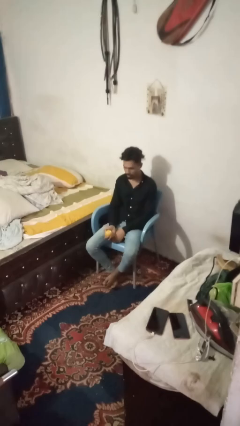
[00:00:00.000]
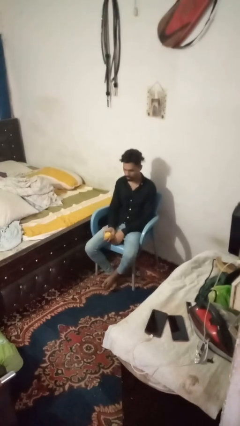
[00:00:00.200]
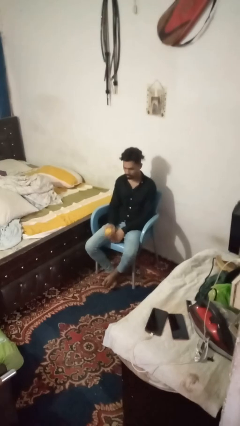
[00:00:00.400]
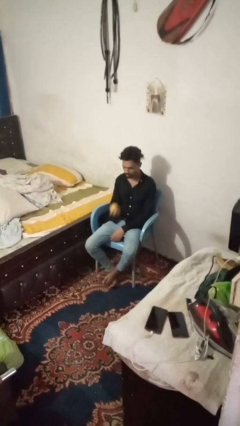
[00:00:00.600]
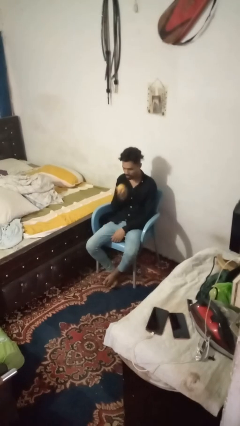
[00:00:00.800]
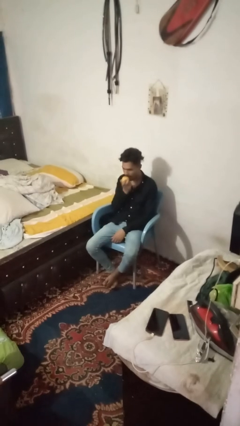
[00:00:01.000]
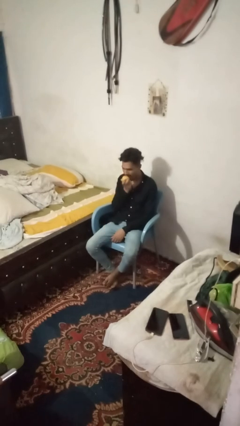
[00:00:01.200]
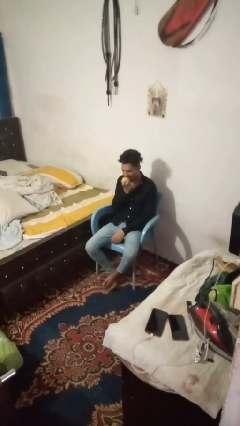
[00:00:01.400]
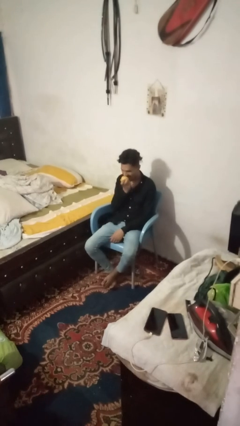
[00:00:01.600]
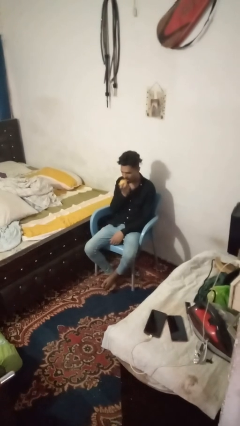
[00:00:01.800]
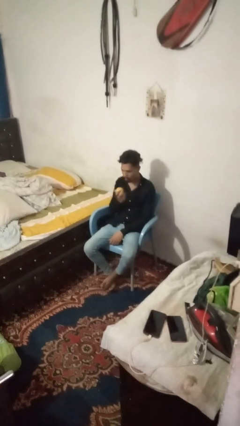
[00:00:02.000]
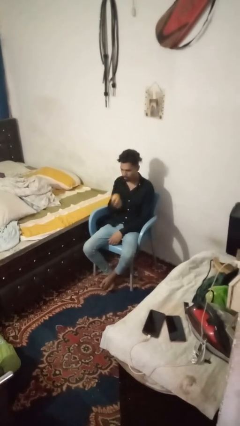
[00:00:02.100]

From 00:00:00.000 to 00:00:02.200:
person eats apple

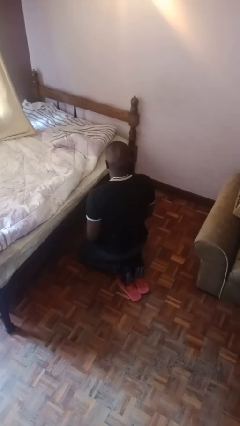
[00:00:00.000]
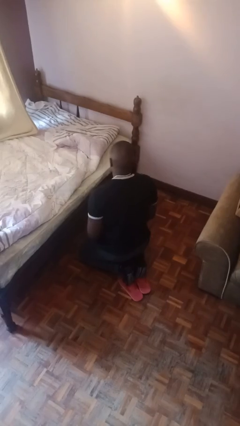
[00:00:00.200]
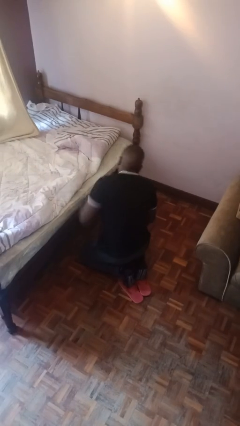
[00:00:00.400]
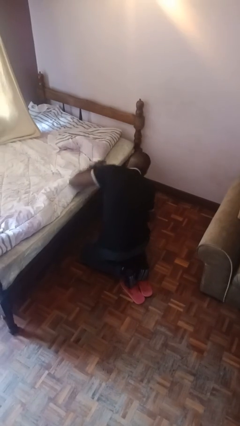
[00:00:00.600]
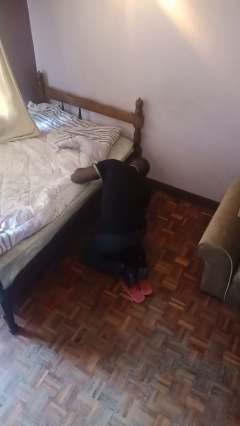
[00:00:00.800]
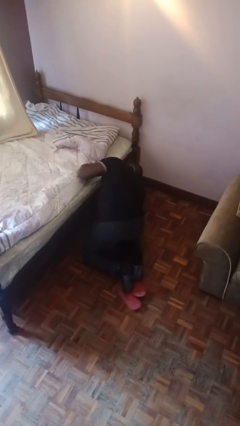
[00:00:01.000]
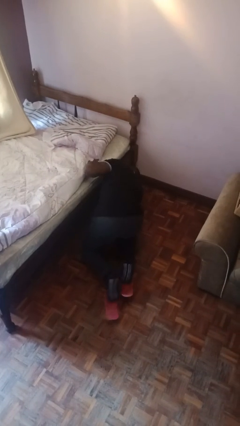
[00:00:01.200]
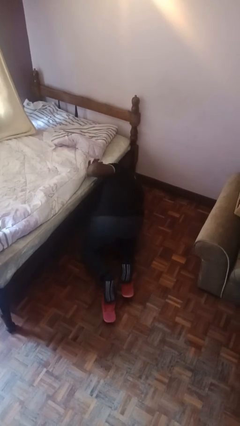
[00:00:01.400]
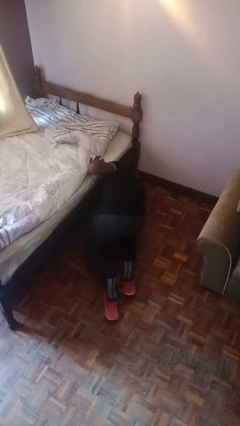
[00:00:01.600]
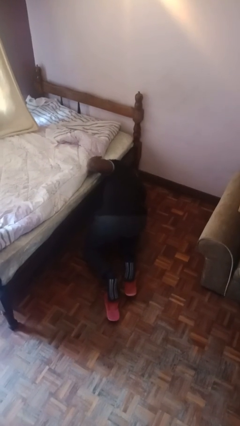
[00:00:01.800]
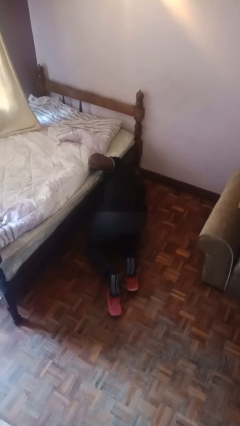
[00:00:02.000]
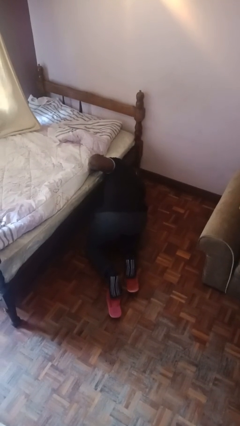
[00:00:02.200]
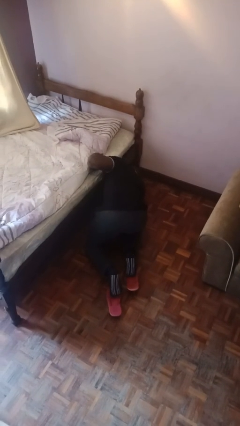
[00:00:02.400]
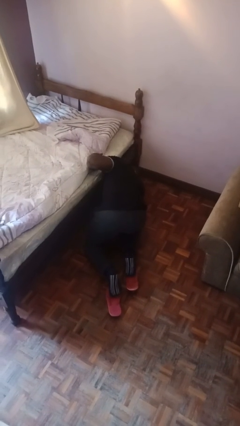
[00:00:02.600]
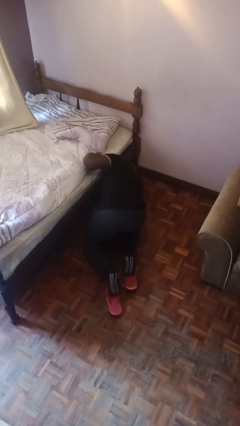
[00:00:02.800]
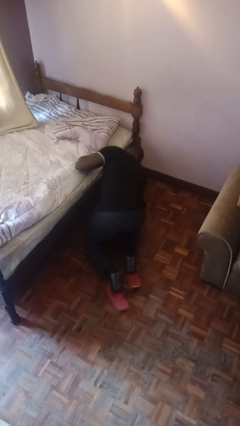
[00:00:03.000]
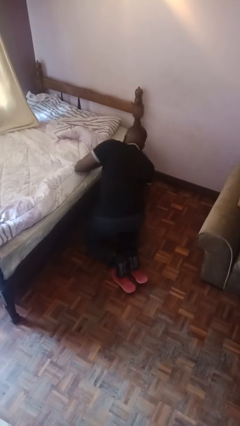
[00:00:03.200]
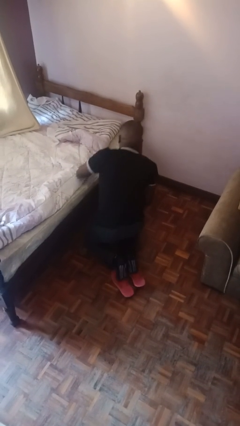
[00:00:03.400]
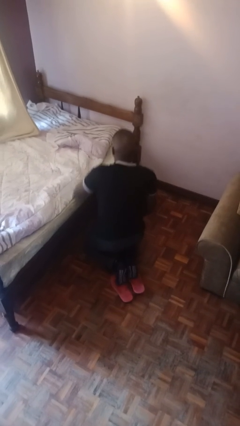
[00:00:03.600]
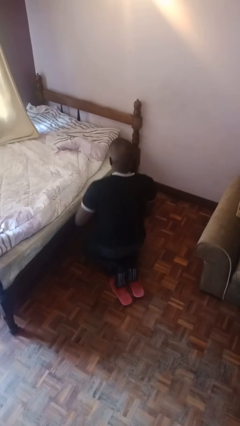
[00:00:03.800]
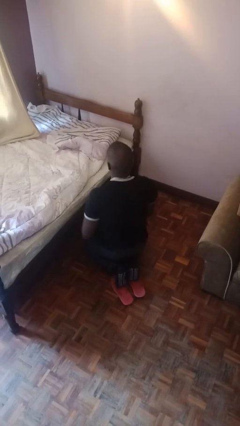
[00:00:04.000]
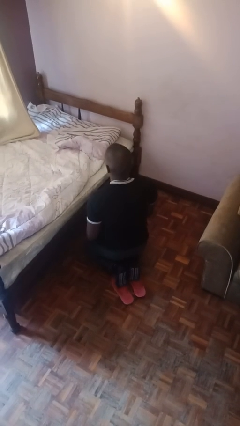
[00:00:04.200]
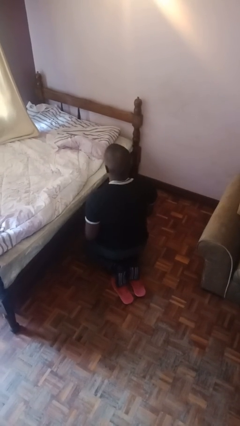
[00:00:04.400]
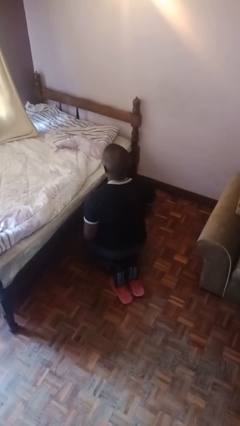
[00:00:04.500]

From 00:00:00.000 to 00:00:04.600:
person searches under bed

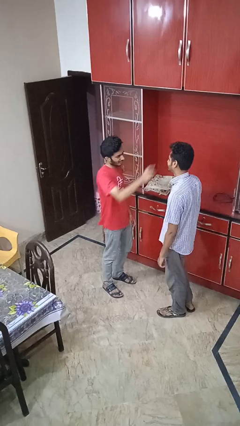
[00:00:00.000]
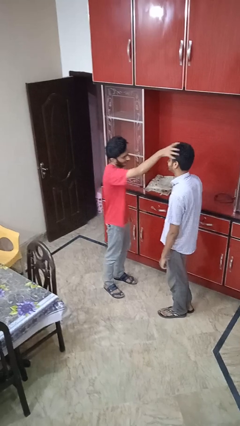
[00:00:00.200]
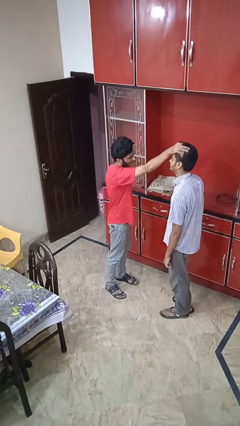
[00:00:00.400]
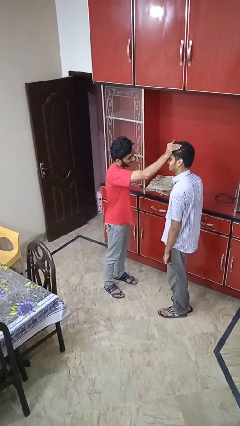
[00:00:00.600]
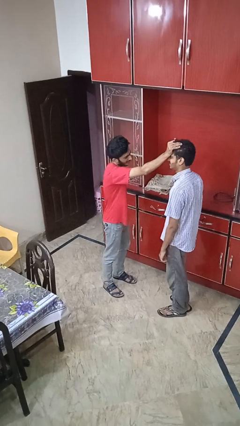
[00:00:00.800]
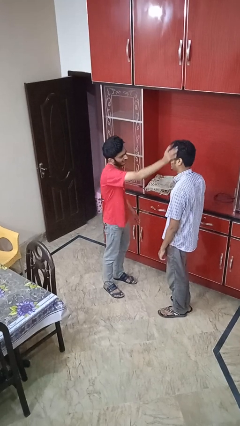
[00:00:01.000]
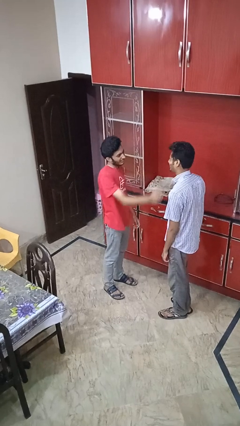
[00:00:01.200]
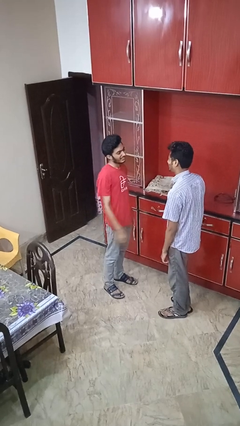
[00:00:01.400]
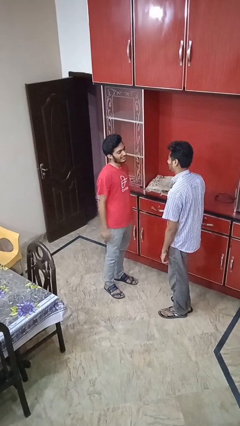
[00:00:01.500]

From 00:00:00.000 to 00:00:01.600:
person grabs person by hair

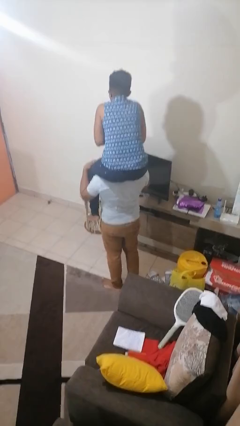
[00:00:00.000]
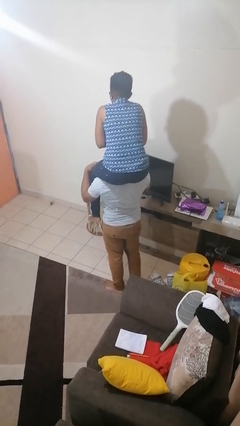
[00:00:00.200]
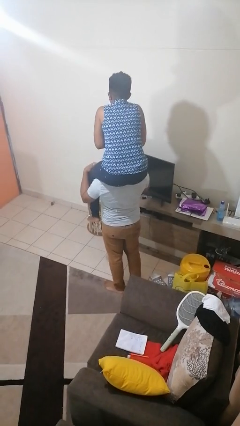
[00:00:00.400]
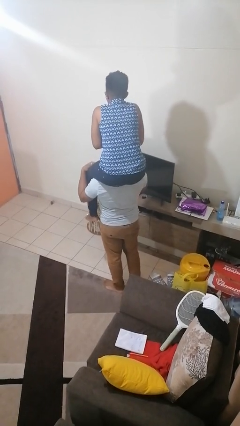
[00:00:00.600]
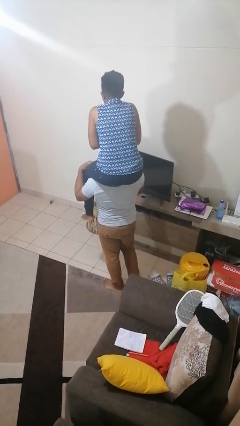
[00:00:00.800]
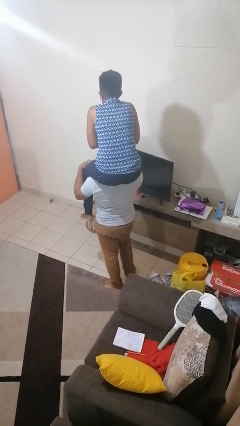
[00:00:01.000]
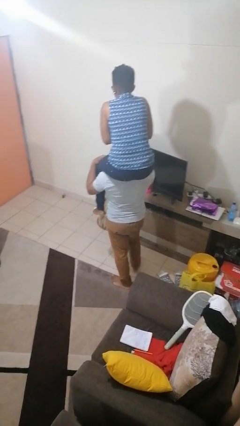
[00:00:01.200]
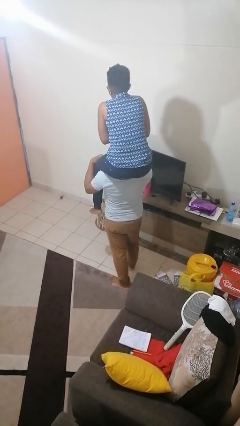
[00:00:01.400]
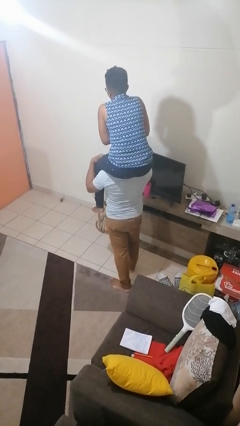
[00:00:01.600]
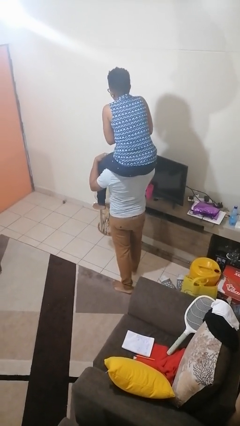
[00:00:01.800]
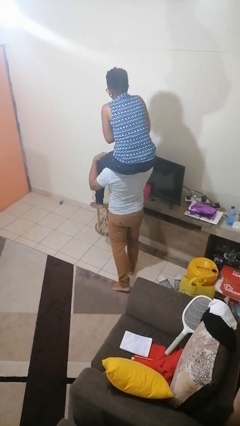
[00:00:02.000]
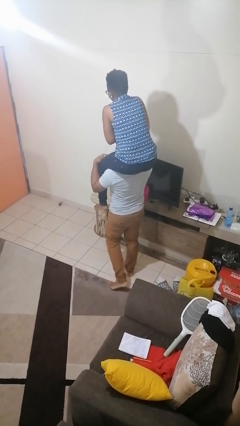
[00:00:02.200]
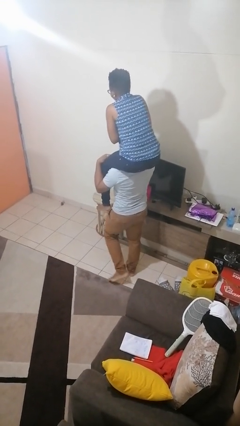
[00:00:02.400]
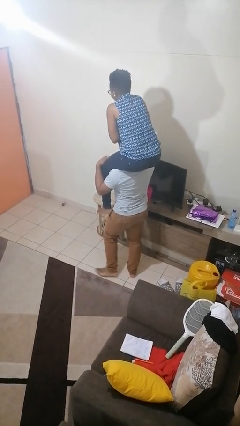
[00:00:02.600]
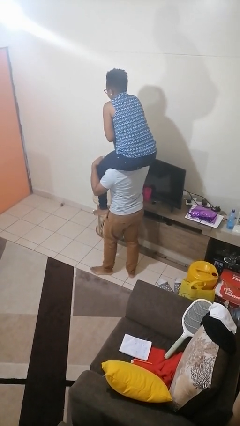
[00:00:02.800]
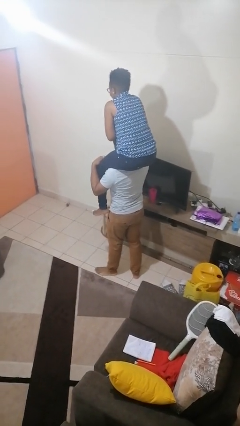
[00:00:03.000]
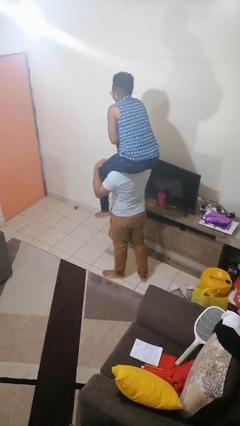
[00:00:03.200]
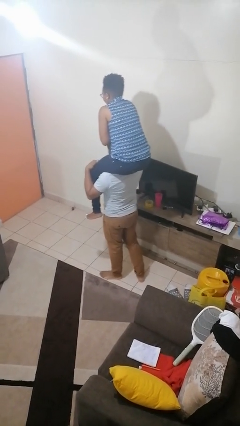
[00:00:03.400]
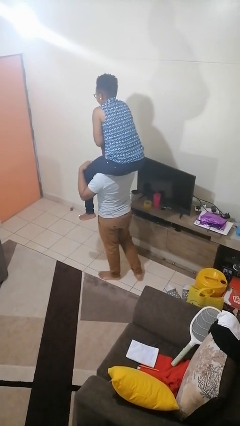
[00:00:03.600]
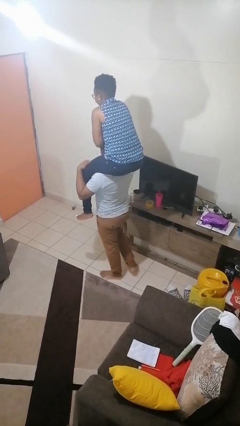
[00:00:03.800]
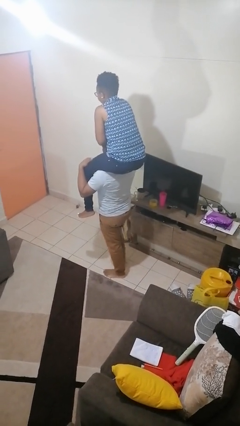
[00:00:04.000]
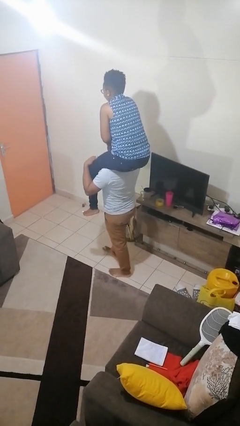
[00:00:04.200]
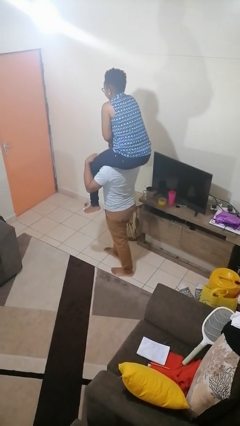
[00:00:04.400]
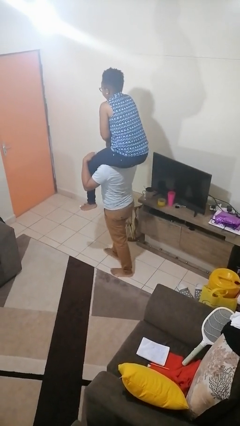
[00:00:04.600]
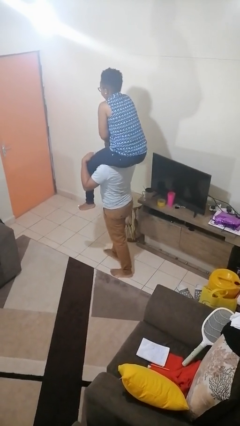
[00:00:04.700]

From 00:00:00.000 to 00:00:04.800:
person carries person on shoulders

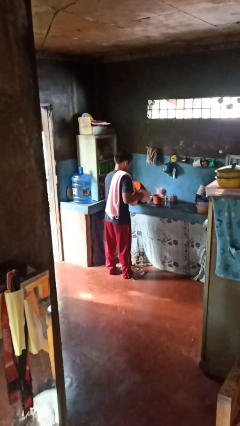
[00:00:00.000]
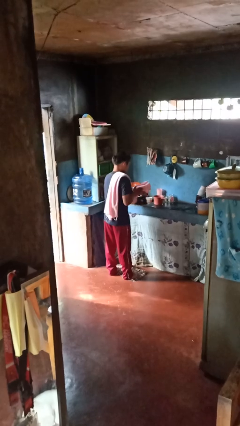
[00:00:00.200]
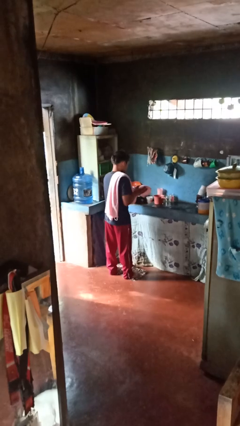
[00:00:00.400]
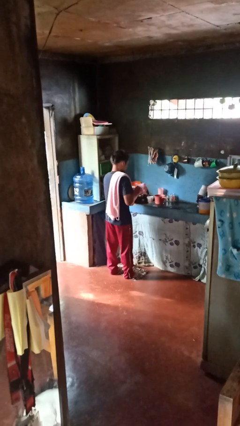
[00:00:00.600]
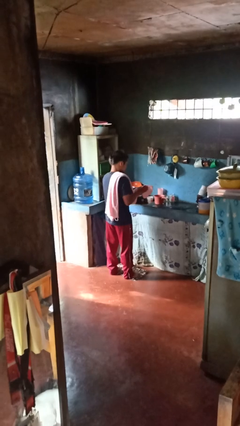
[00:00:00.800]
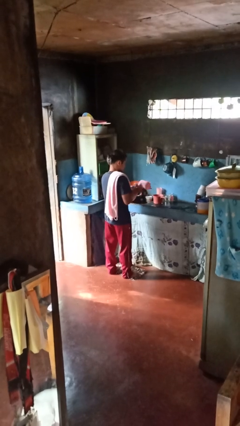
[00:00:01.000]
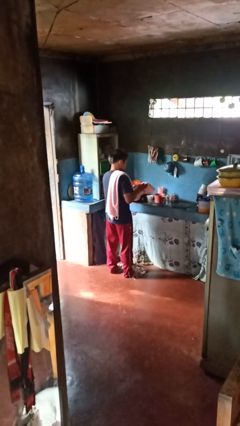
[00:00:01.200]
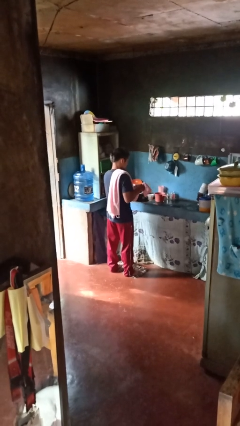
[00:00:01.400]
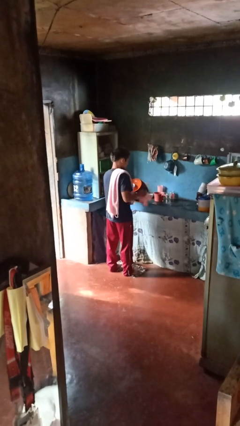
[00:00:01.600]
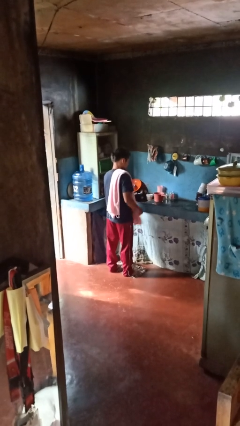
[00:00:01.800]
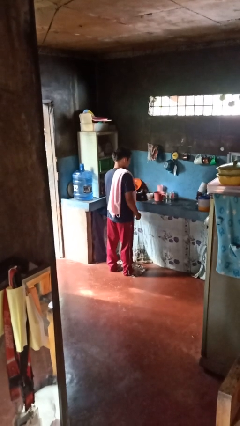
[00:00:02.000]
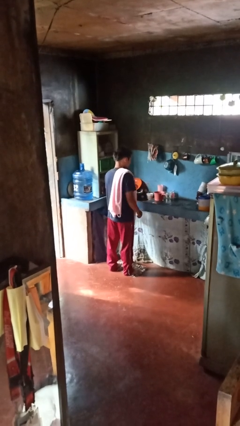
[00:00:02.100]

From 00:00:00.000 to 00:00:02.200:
person dries hands with towel

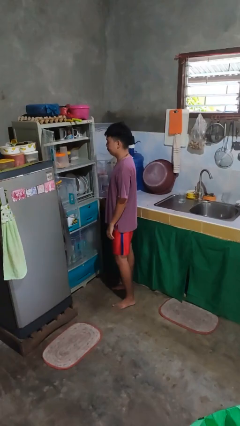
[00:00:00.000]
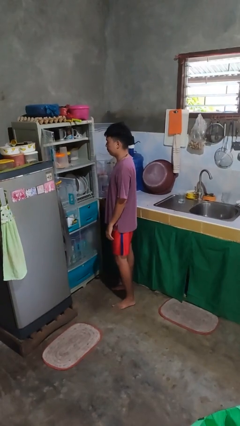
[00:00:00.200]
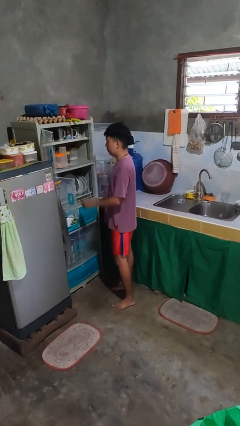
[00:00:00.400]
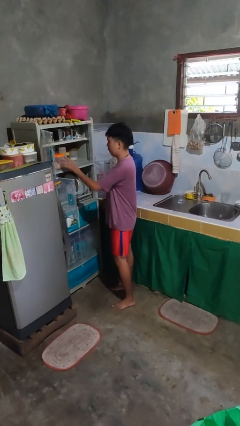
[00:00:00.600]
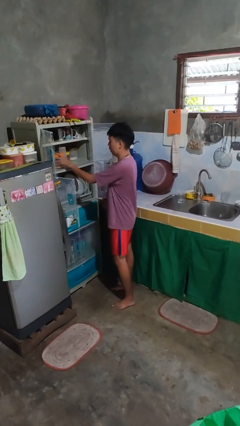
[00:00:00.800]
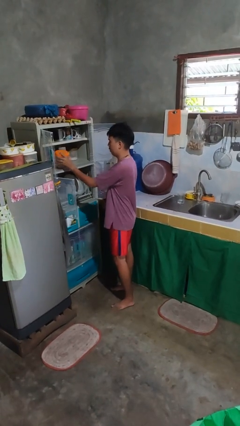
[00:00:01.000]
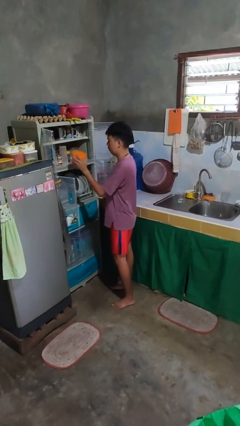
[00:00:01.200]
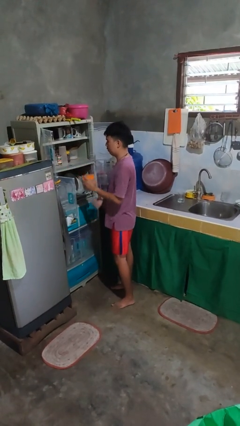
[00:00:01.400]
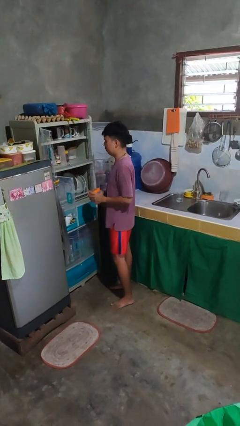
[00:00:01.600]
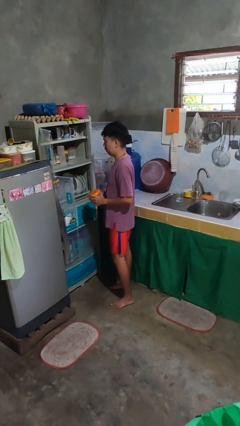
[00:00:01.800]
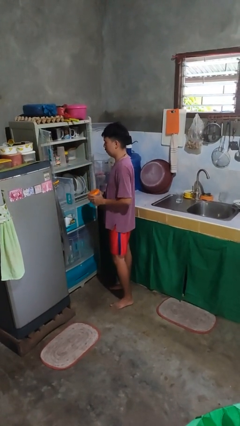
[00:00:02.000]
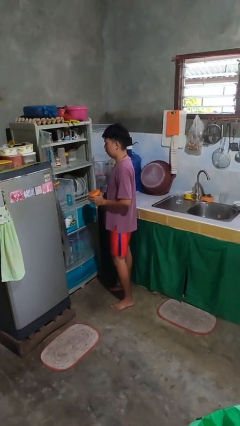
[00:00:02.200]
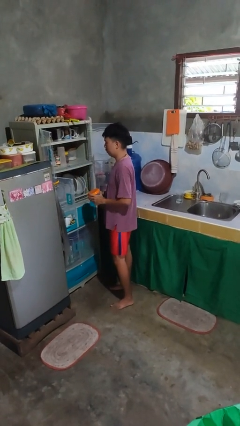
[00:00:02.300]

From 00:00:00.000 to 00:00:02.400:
person takes object from cabinet
